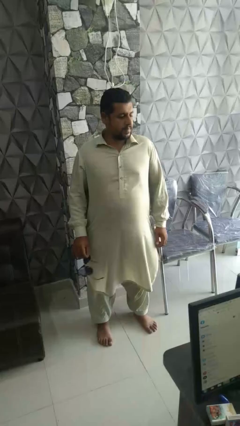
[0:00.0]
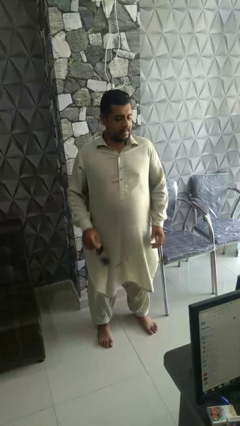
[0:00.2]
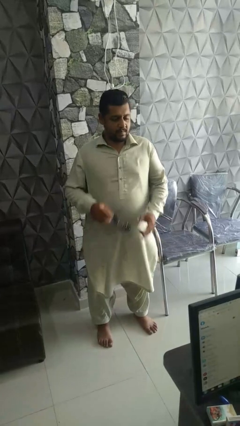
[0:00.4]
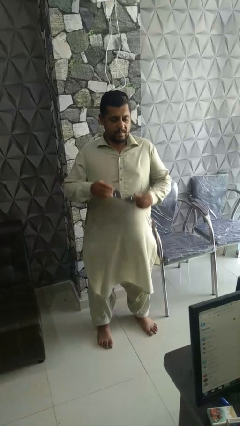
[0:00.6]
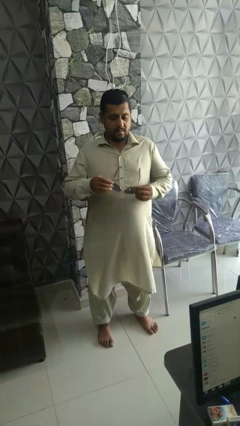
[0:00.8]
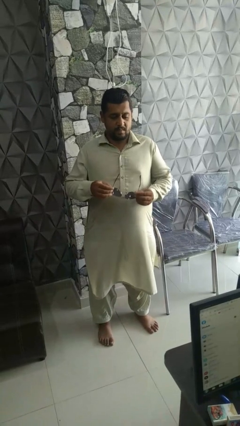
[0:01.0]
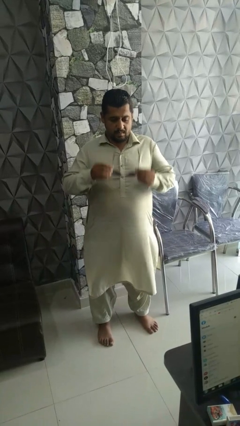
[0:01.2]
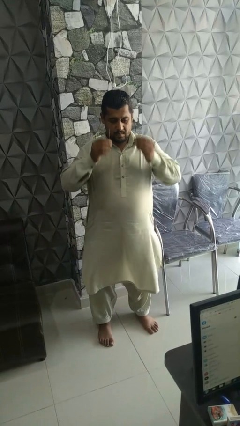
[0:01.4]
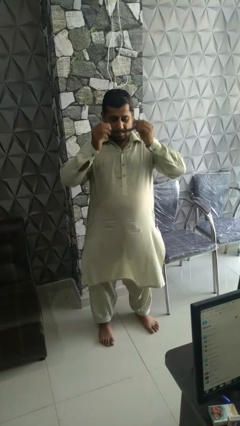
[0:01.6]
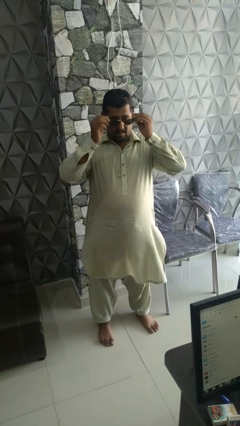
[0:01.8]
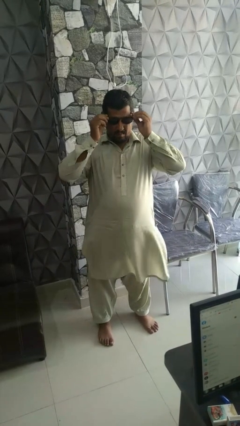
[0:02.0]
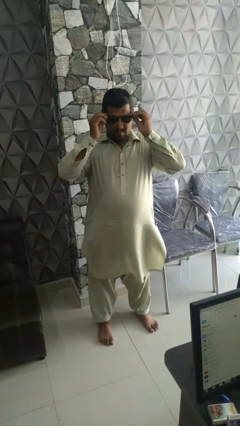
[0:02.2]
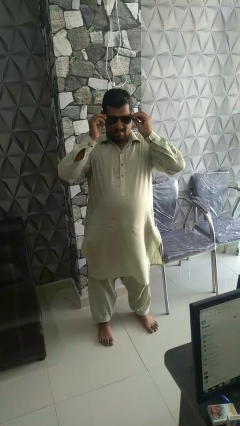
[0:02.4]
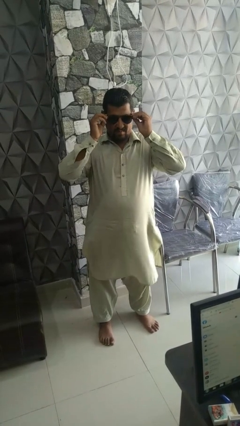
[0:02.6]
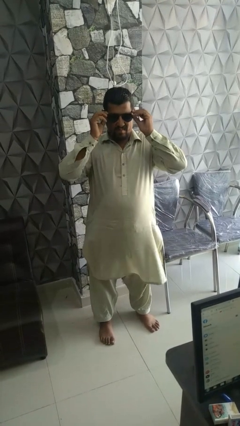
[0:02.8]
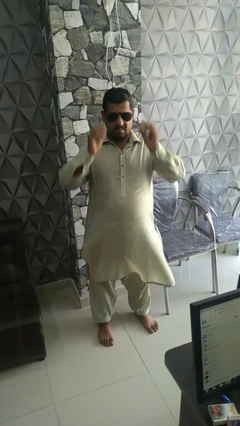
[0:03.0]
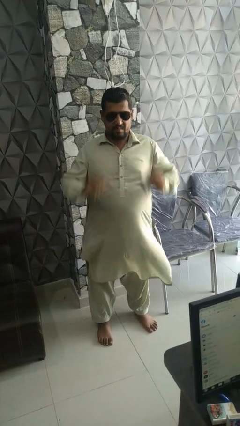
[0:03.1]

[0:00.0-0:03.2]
person puts on sunglasses

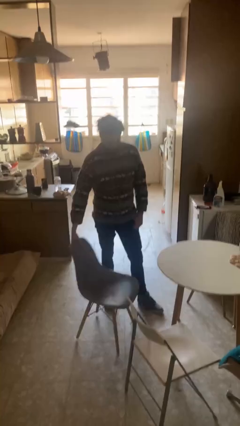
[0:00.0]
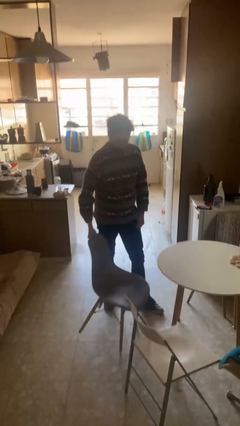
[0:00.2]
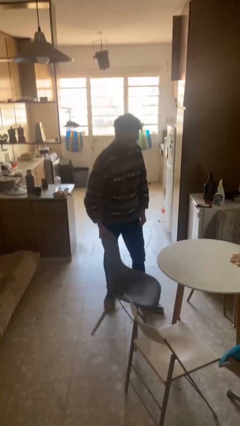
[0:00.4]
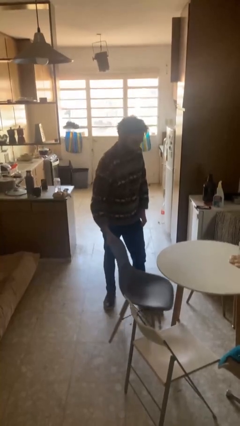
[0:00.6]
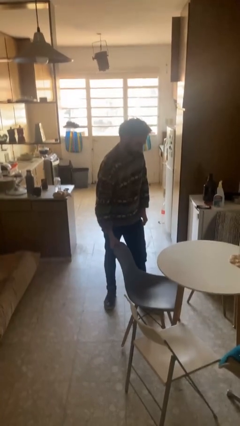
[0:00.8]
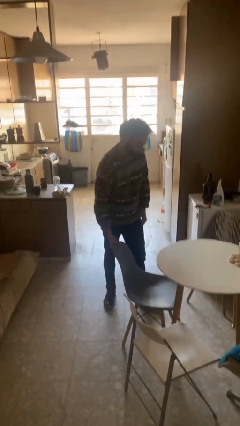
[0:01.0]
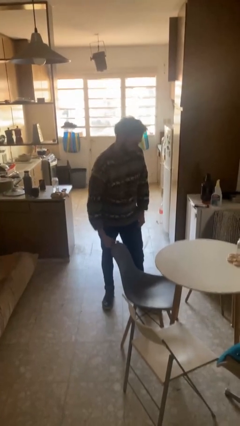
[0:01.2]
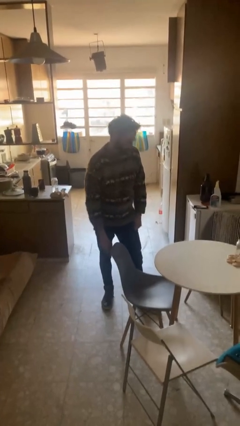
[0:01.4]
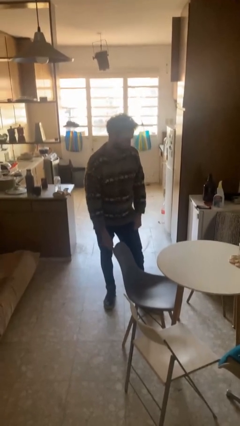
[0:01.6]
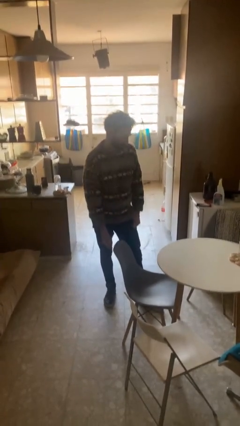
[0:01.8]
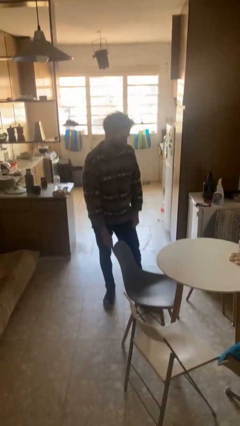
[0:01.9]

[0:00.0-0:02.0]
person pushes in chair

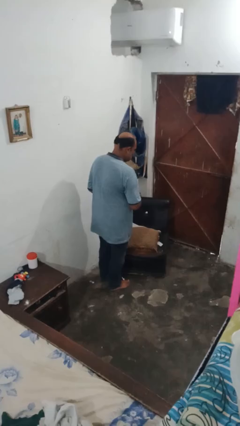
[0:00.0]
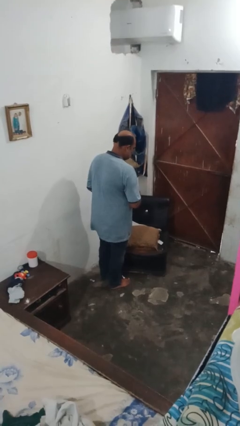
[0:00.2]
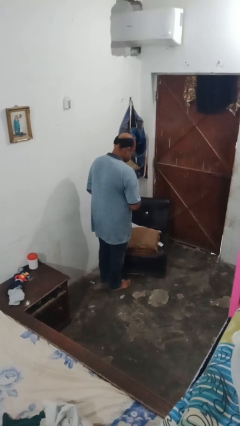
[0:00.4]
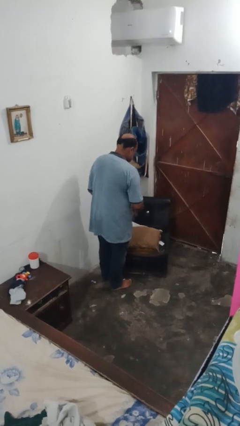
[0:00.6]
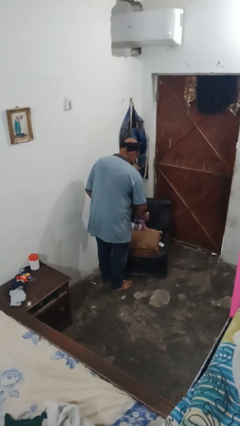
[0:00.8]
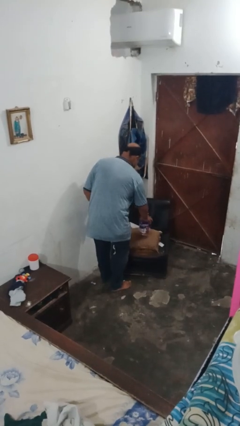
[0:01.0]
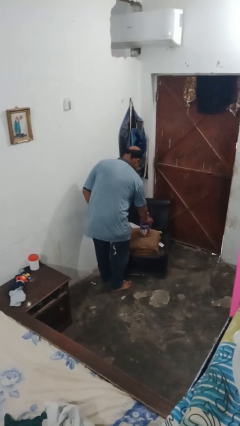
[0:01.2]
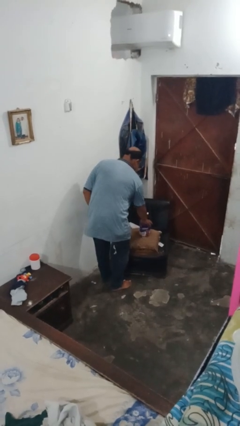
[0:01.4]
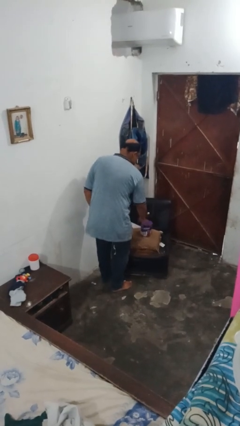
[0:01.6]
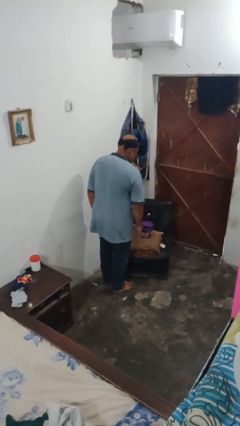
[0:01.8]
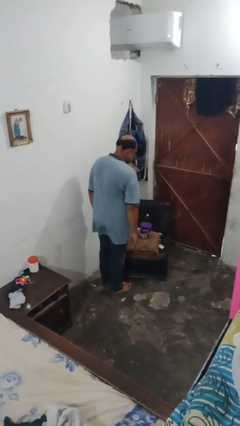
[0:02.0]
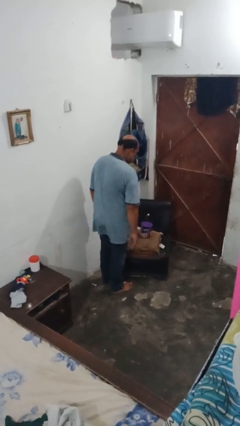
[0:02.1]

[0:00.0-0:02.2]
person puts down object on couch

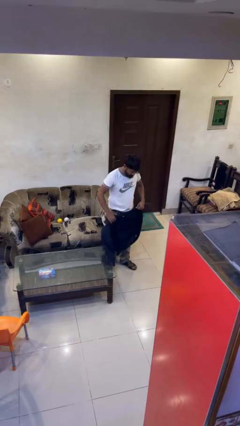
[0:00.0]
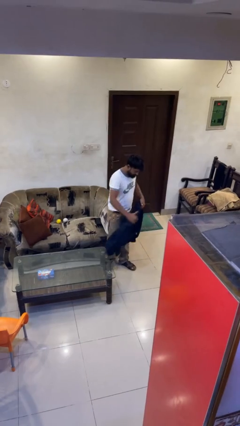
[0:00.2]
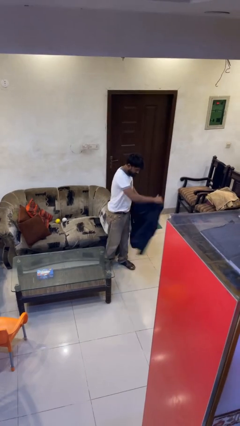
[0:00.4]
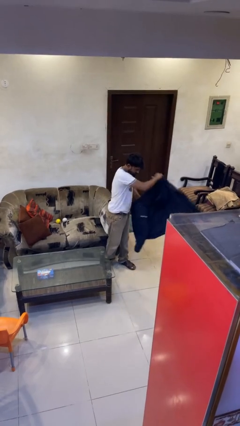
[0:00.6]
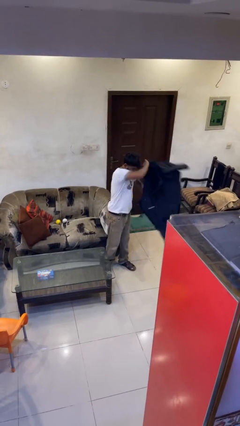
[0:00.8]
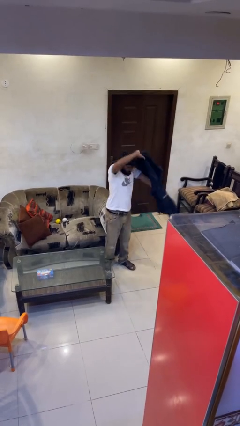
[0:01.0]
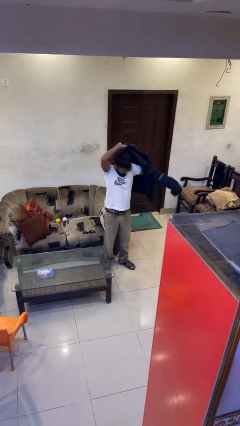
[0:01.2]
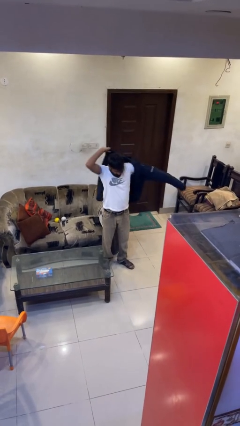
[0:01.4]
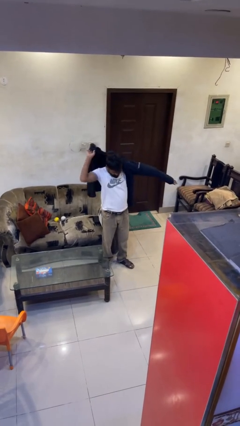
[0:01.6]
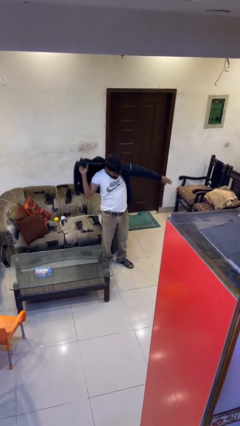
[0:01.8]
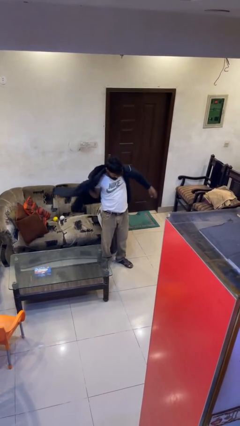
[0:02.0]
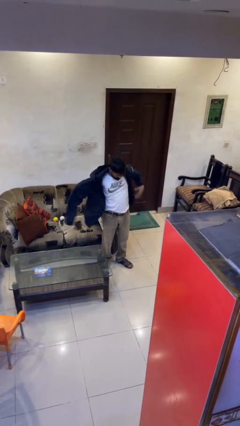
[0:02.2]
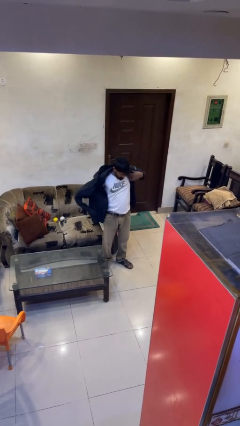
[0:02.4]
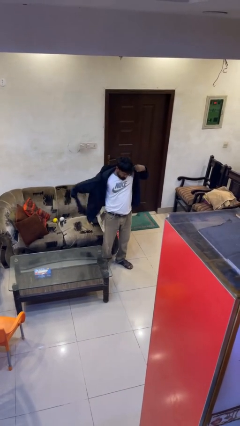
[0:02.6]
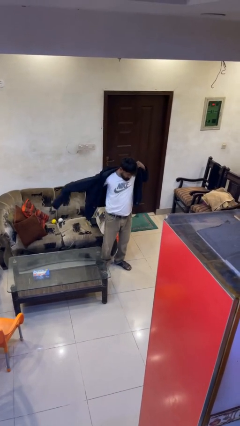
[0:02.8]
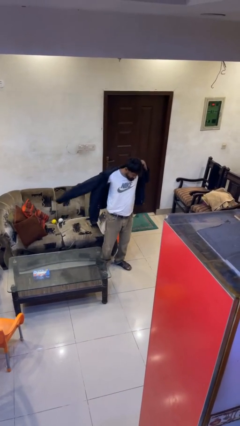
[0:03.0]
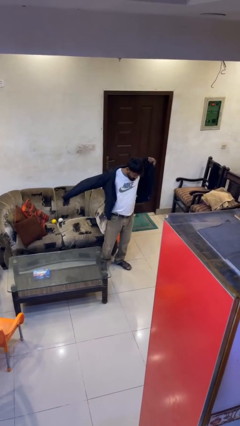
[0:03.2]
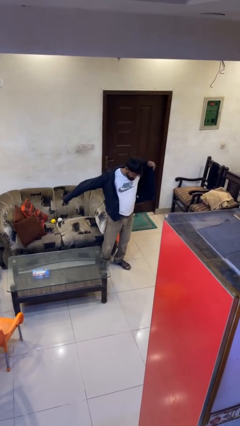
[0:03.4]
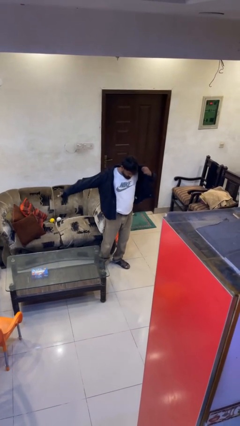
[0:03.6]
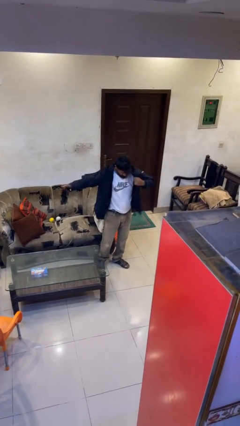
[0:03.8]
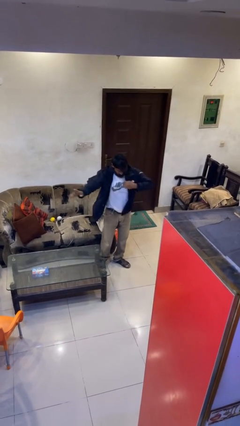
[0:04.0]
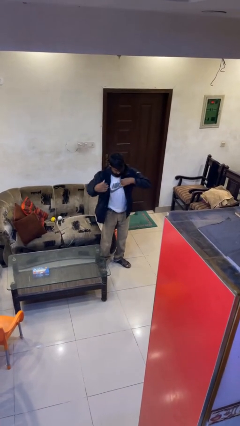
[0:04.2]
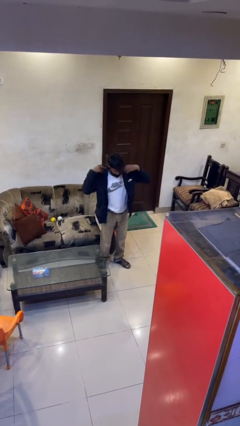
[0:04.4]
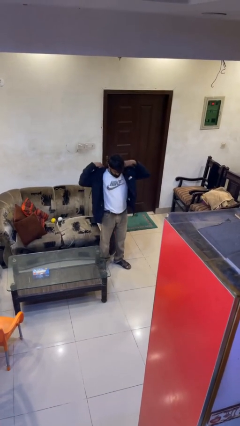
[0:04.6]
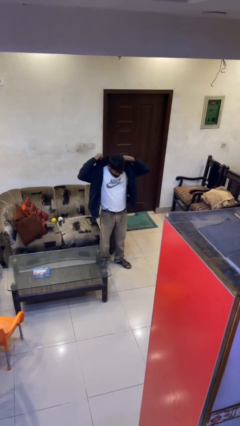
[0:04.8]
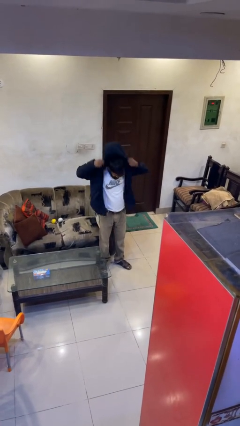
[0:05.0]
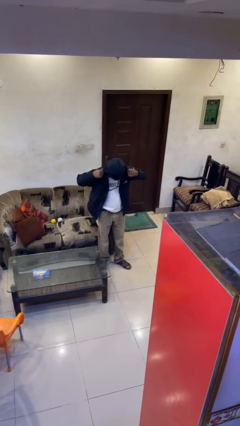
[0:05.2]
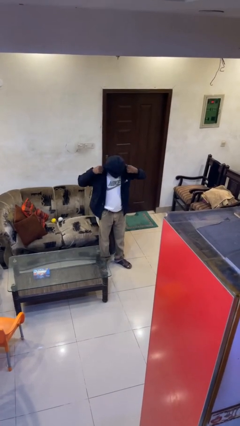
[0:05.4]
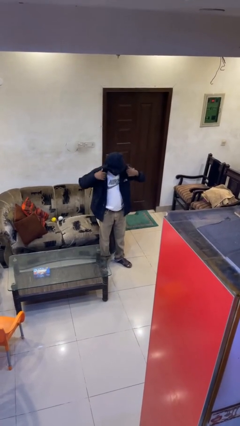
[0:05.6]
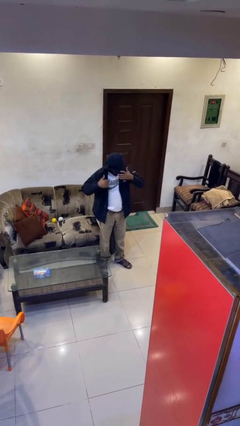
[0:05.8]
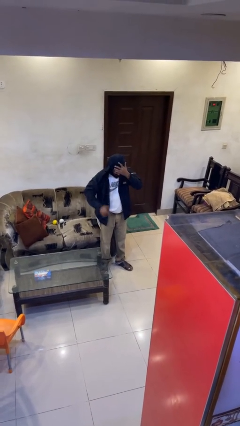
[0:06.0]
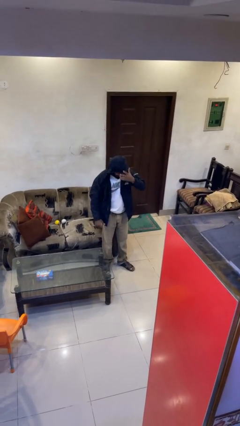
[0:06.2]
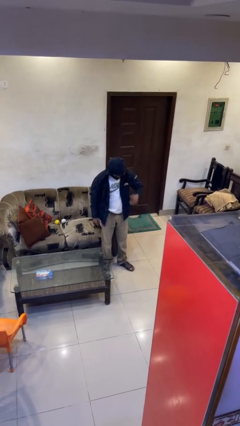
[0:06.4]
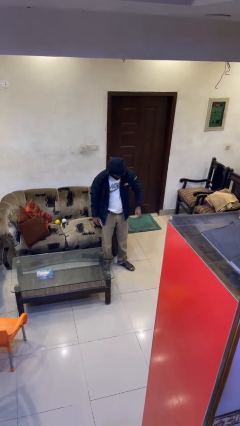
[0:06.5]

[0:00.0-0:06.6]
person puts on hoodie

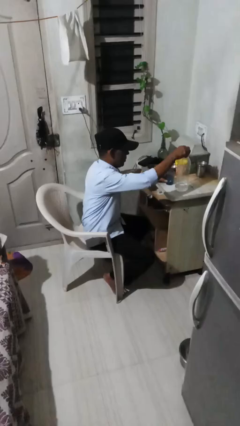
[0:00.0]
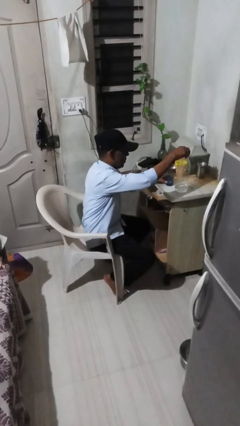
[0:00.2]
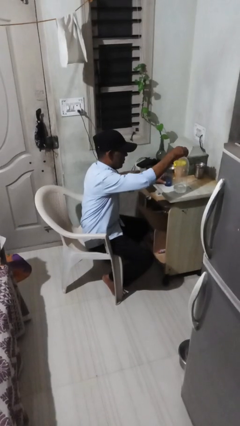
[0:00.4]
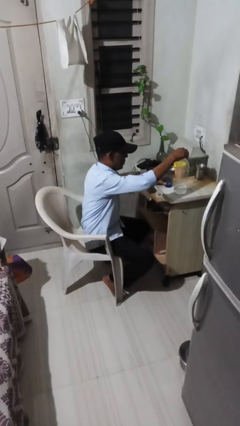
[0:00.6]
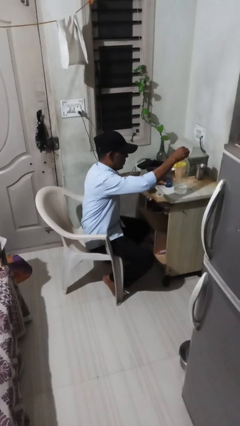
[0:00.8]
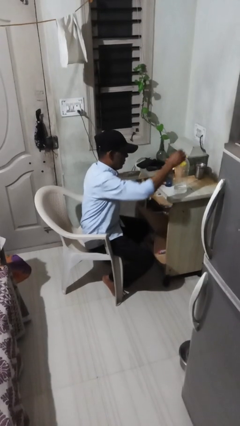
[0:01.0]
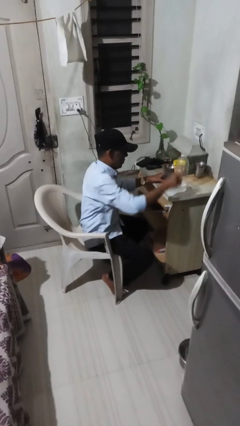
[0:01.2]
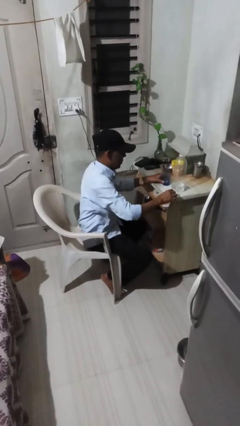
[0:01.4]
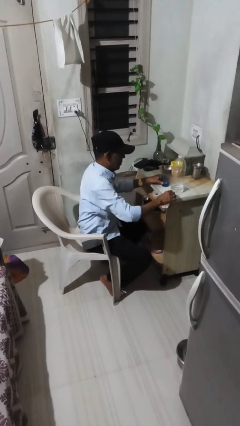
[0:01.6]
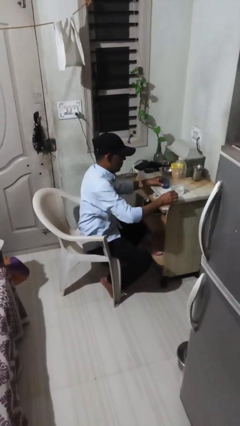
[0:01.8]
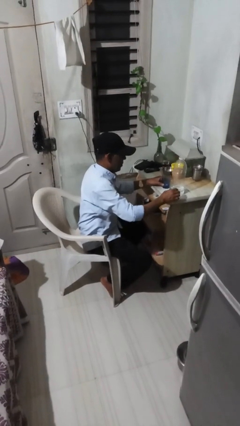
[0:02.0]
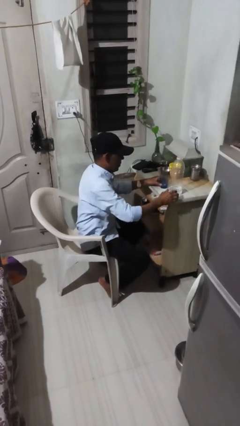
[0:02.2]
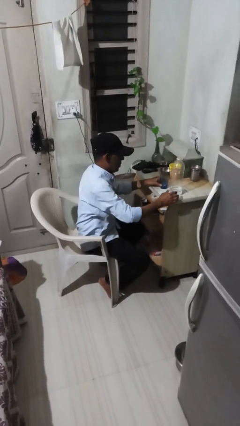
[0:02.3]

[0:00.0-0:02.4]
person unscrews lid from bottle

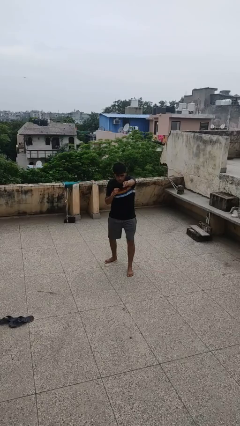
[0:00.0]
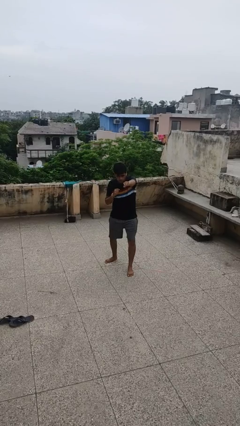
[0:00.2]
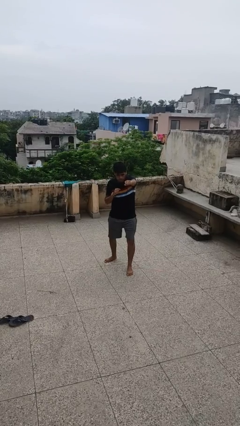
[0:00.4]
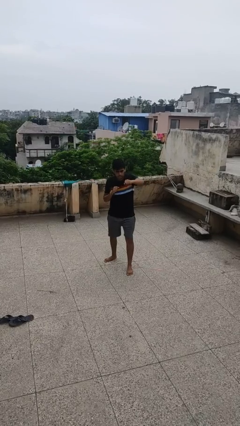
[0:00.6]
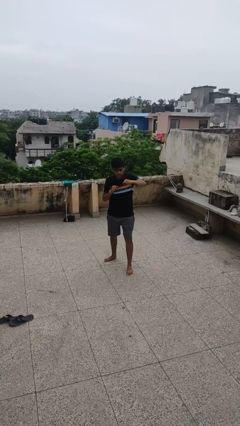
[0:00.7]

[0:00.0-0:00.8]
person punches

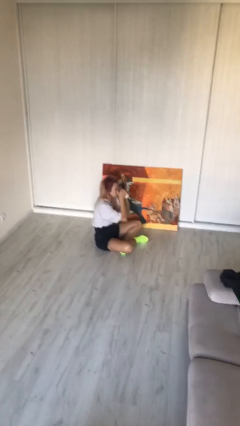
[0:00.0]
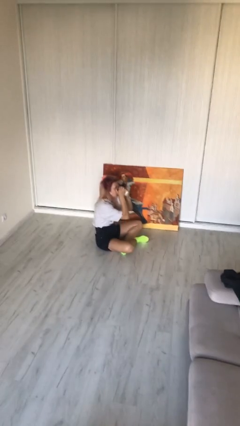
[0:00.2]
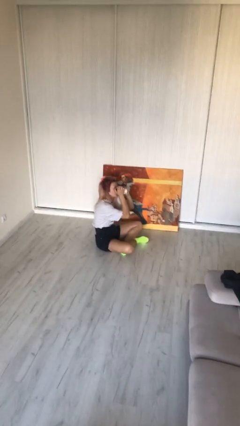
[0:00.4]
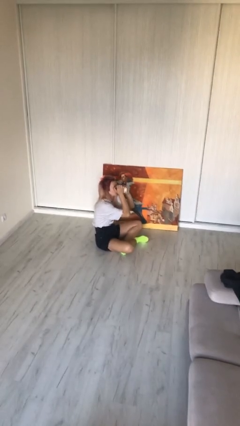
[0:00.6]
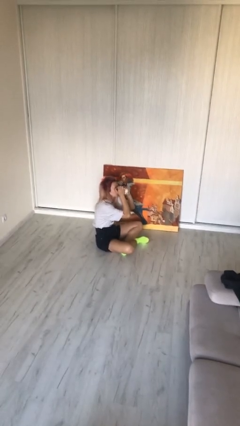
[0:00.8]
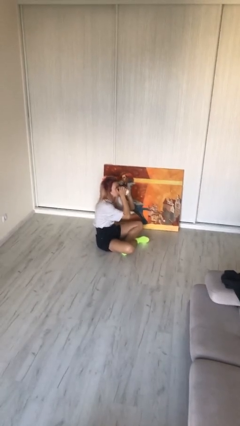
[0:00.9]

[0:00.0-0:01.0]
person drinks from mug
